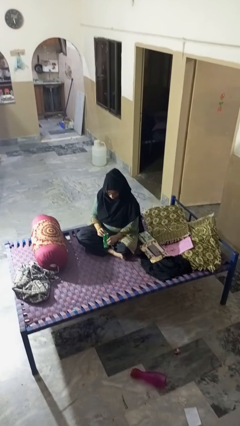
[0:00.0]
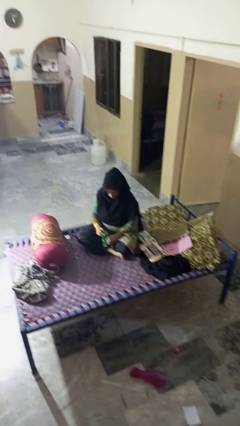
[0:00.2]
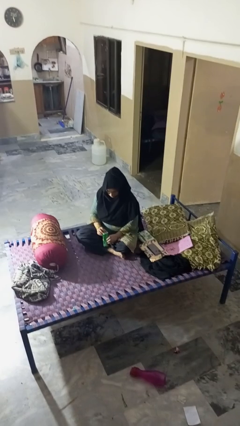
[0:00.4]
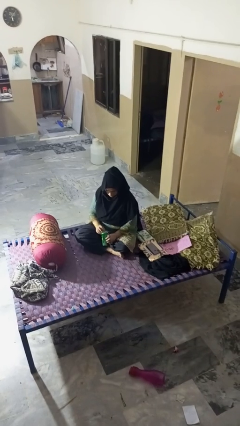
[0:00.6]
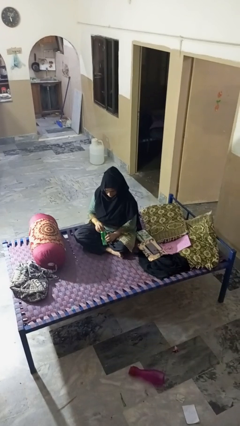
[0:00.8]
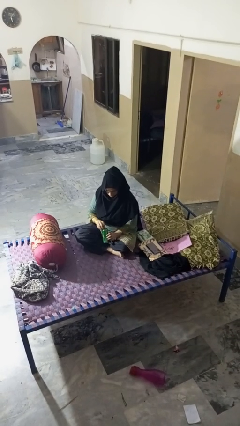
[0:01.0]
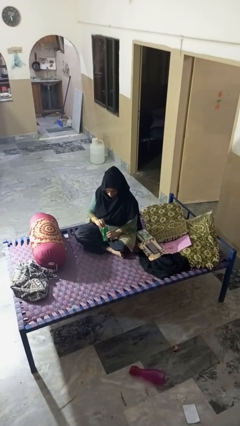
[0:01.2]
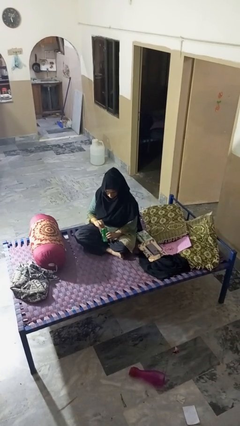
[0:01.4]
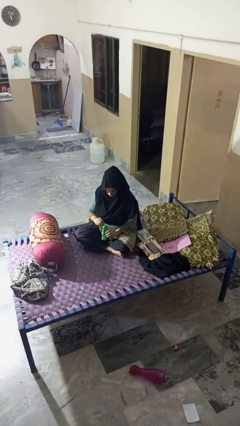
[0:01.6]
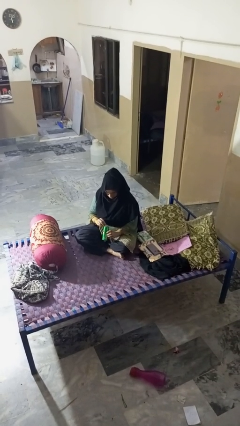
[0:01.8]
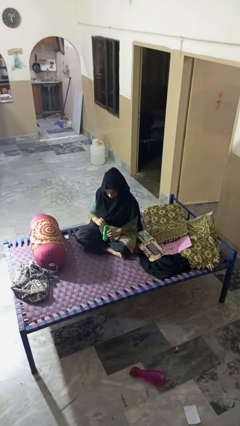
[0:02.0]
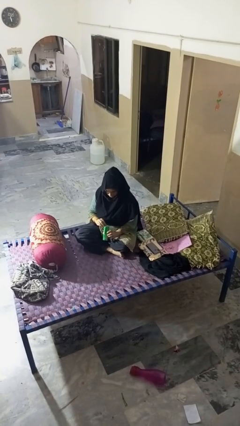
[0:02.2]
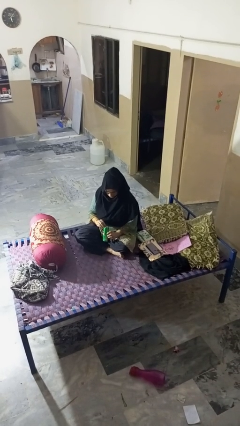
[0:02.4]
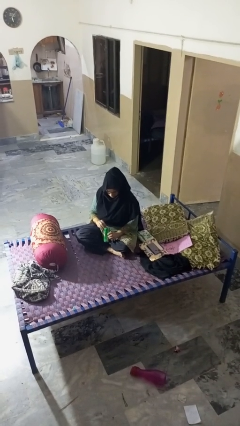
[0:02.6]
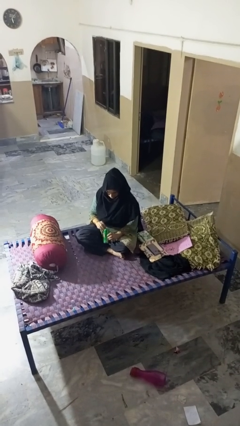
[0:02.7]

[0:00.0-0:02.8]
person opens can with can opener

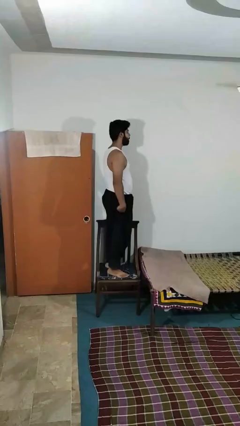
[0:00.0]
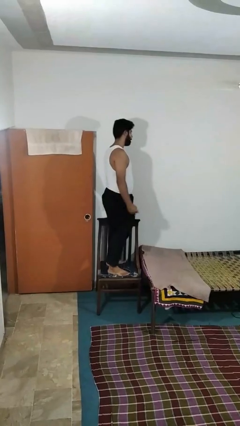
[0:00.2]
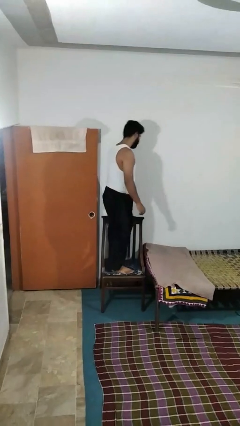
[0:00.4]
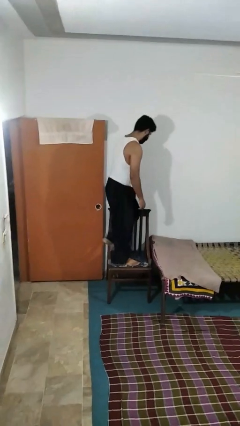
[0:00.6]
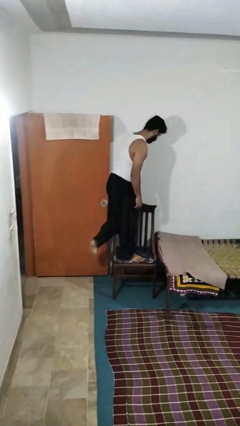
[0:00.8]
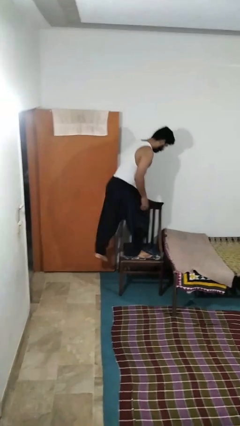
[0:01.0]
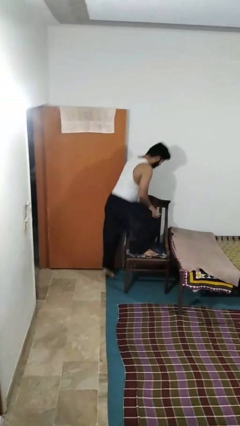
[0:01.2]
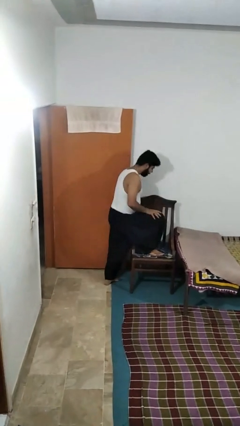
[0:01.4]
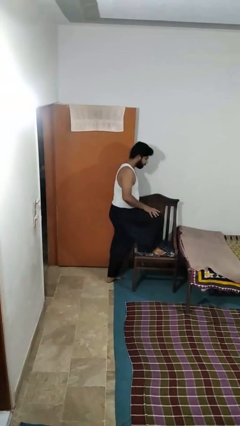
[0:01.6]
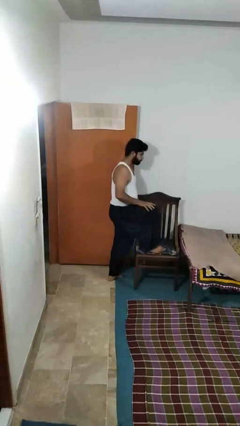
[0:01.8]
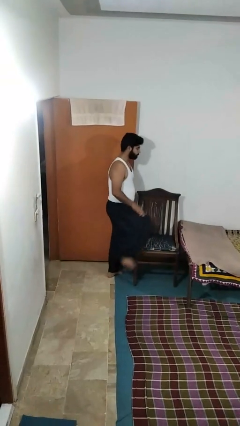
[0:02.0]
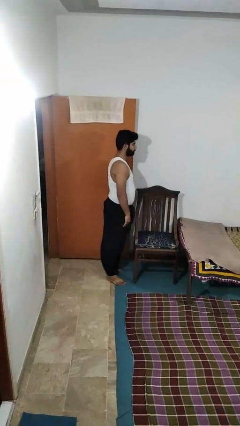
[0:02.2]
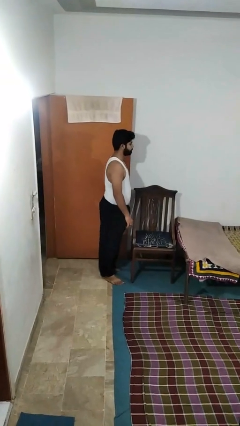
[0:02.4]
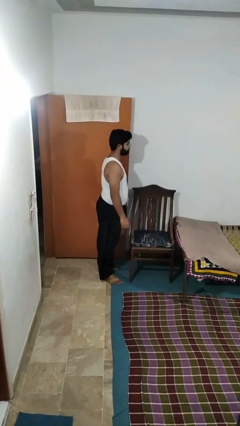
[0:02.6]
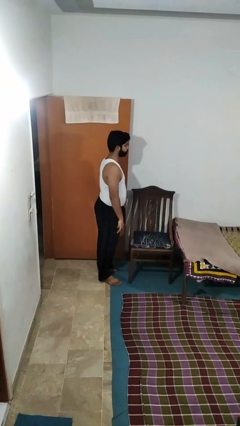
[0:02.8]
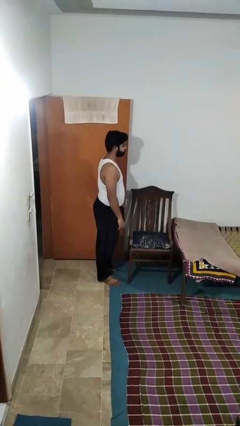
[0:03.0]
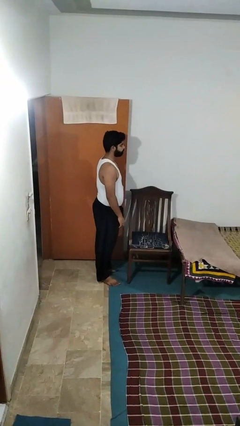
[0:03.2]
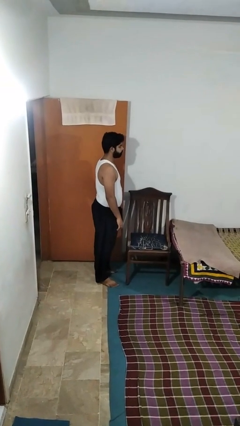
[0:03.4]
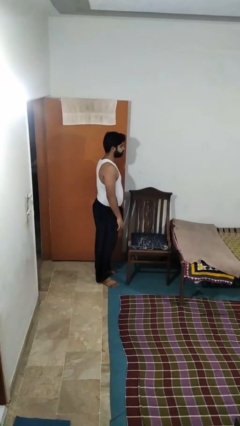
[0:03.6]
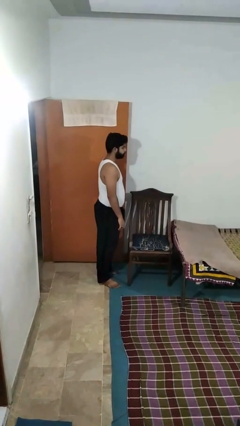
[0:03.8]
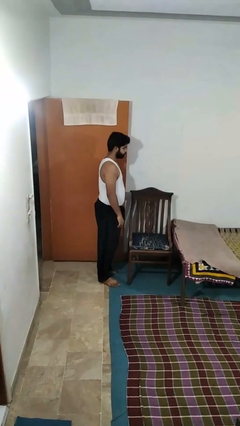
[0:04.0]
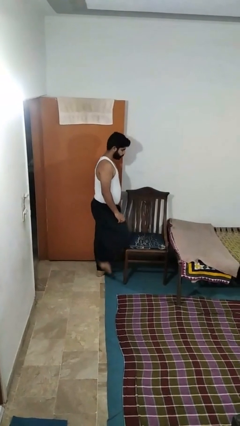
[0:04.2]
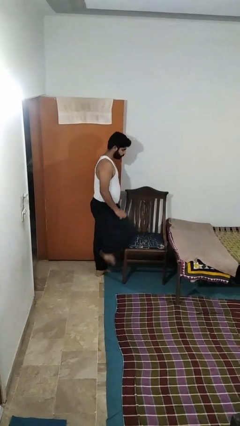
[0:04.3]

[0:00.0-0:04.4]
person climbs off chair

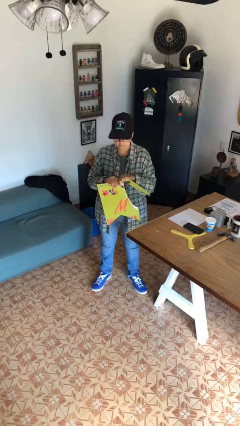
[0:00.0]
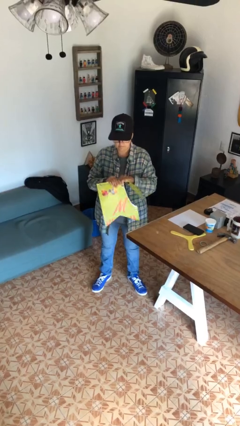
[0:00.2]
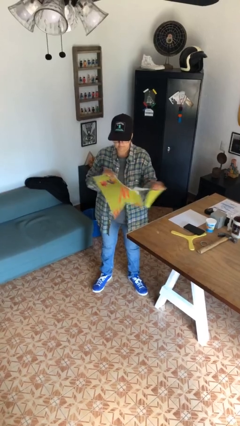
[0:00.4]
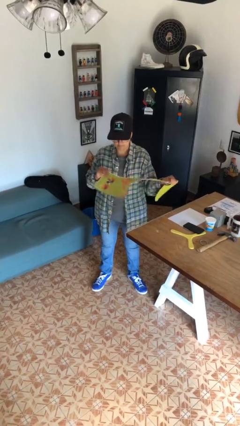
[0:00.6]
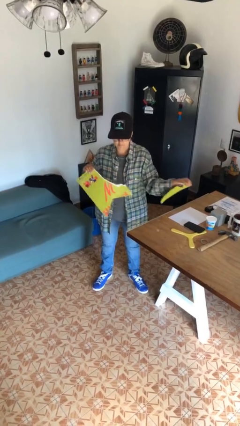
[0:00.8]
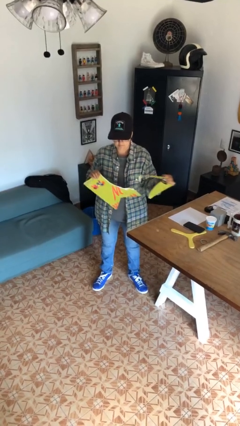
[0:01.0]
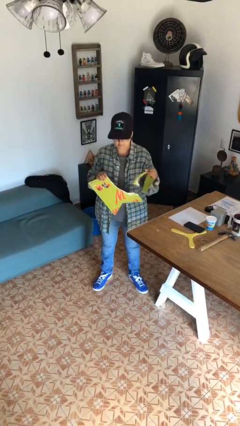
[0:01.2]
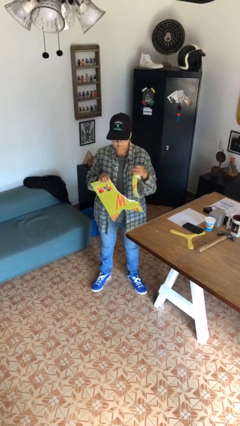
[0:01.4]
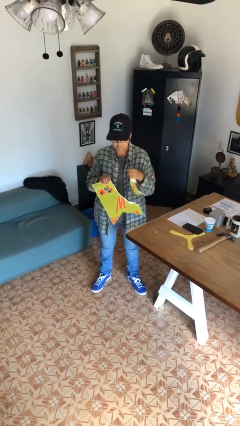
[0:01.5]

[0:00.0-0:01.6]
person tears paper

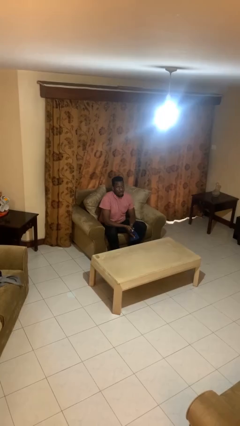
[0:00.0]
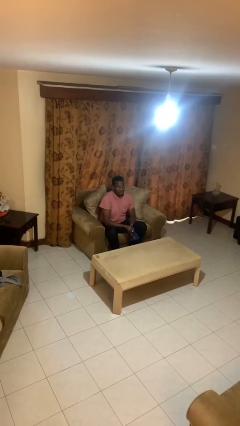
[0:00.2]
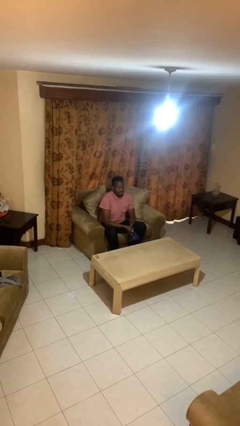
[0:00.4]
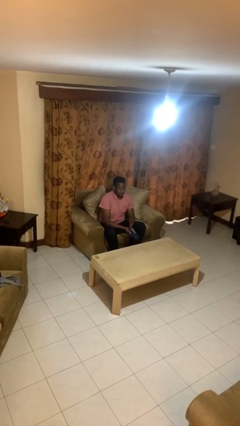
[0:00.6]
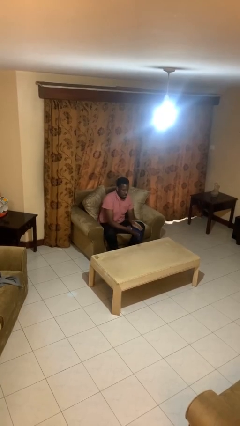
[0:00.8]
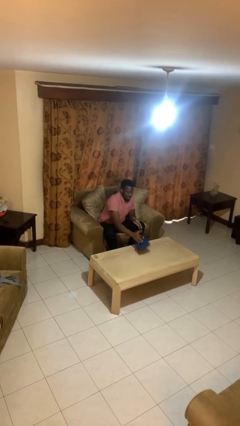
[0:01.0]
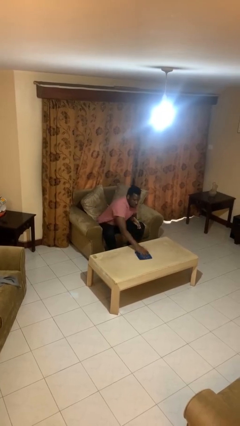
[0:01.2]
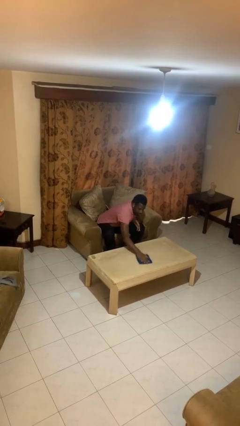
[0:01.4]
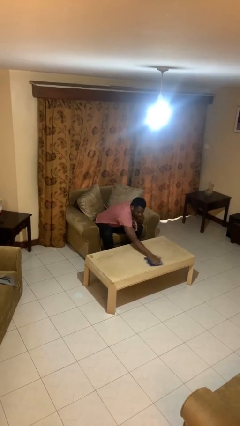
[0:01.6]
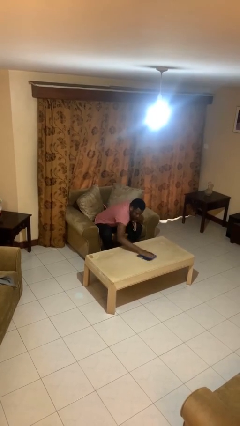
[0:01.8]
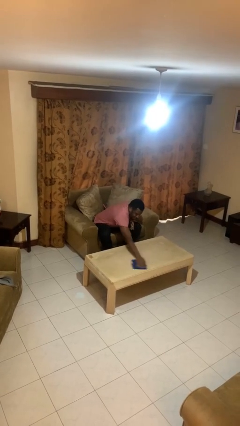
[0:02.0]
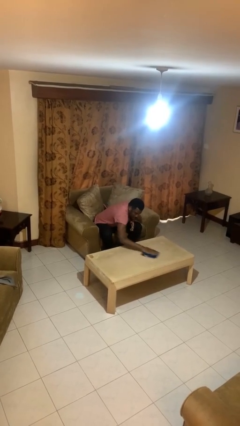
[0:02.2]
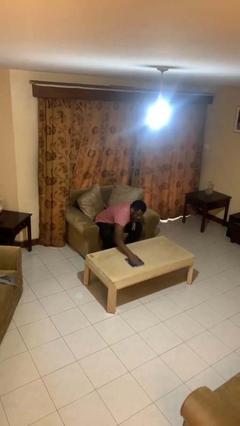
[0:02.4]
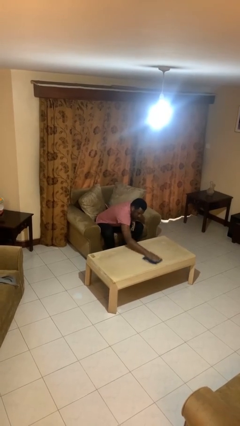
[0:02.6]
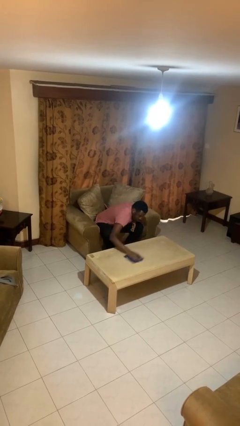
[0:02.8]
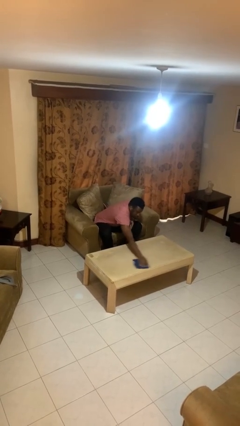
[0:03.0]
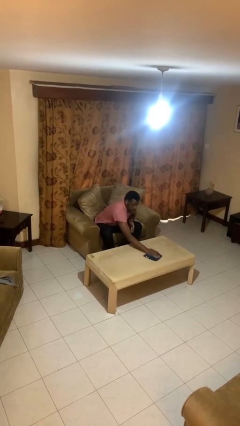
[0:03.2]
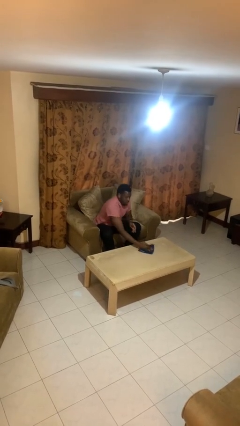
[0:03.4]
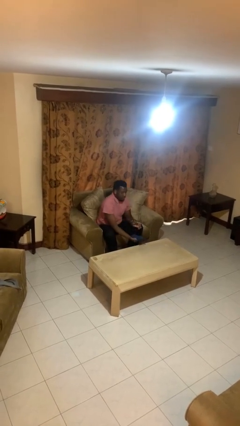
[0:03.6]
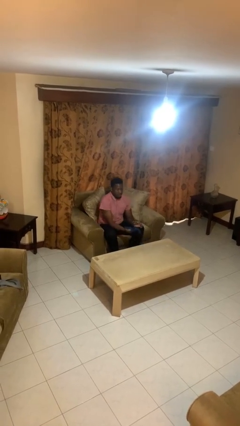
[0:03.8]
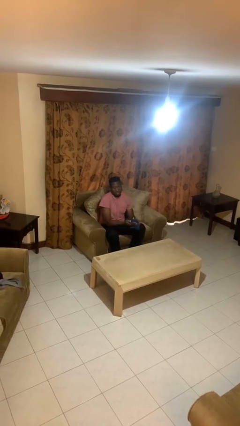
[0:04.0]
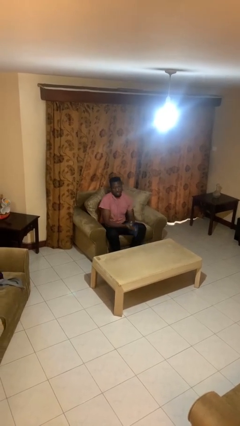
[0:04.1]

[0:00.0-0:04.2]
person cleans table with rag

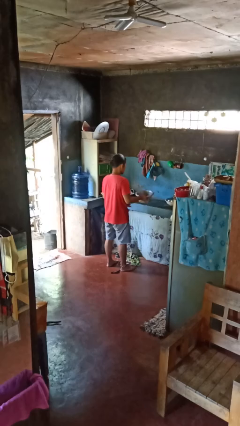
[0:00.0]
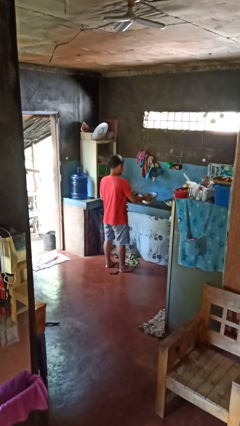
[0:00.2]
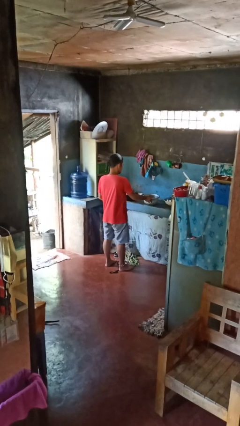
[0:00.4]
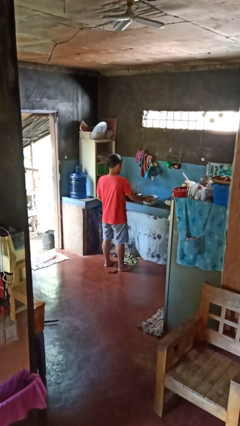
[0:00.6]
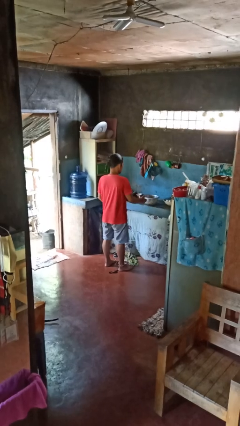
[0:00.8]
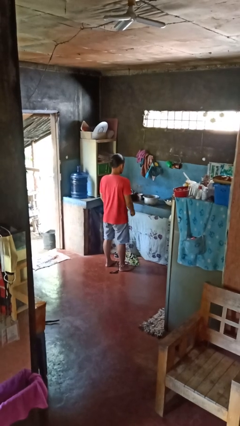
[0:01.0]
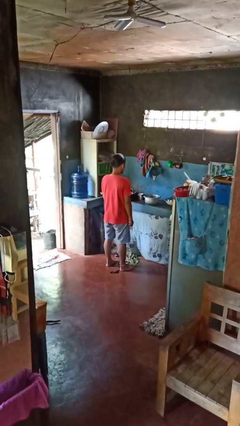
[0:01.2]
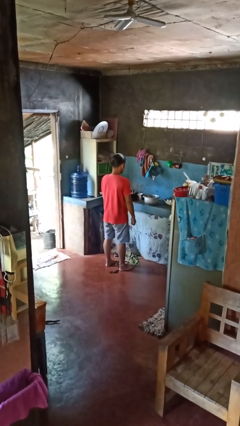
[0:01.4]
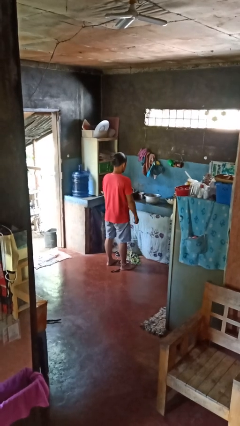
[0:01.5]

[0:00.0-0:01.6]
person puts down object on countertop

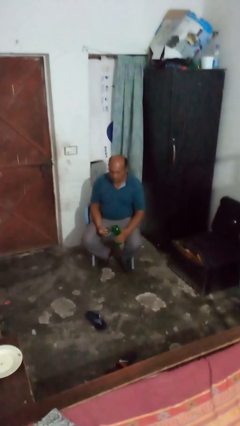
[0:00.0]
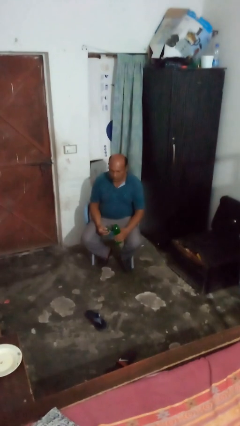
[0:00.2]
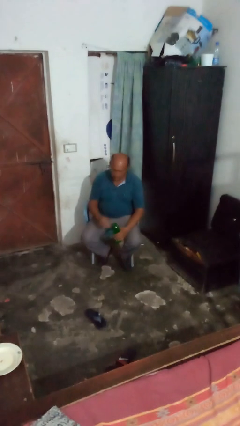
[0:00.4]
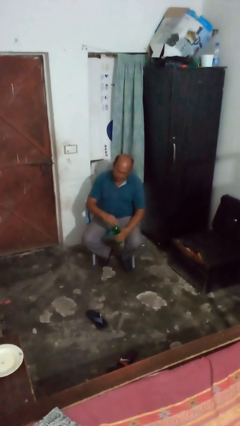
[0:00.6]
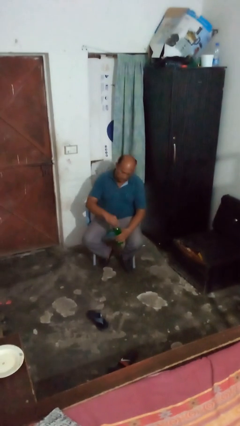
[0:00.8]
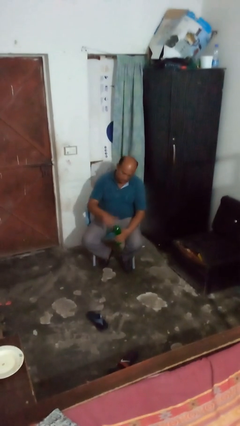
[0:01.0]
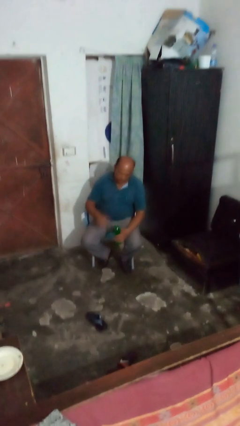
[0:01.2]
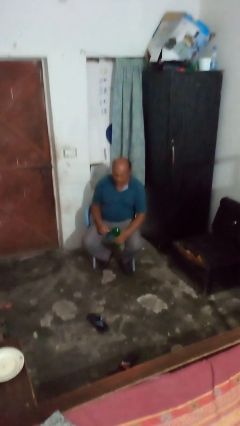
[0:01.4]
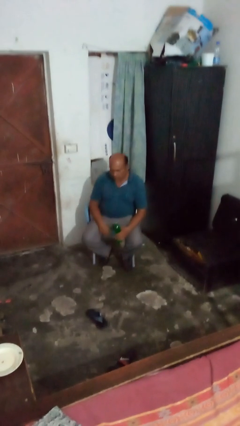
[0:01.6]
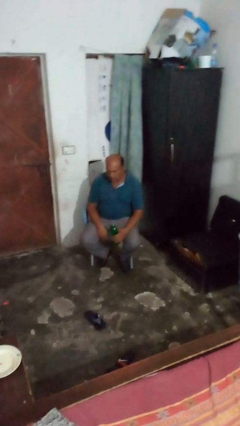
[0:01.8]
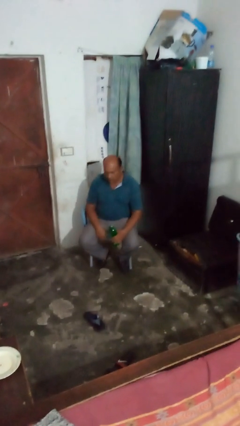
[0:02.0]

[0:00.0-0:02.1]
person screws lid to bottle

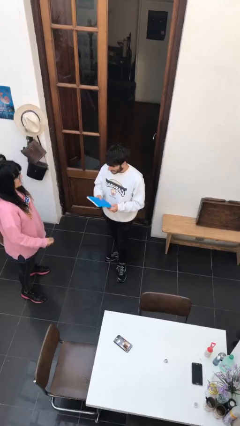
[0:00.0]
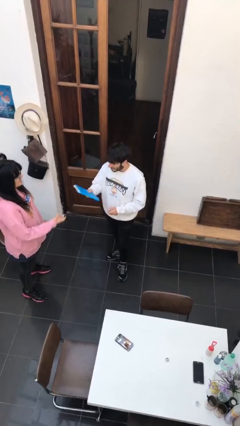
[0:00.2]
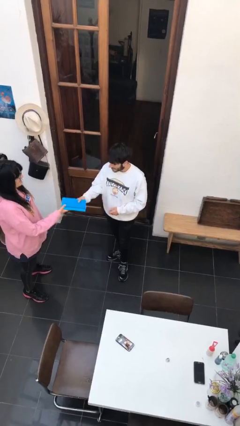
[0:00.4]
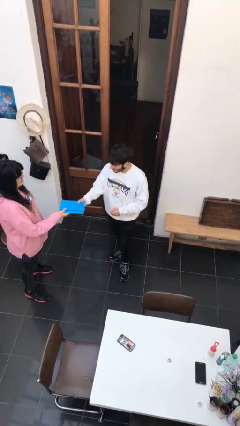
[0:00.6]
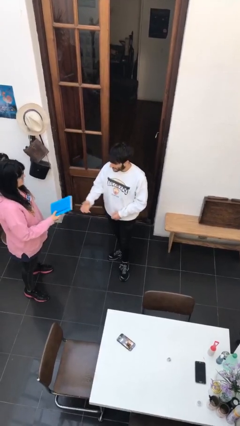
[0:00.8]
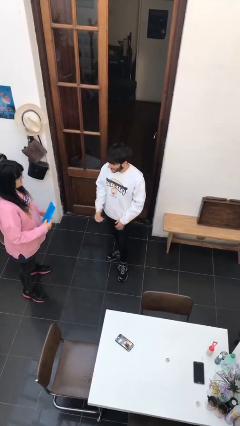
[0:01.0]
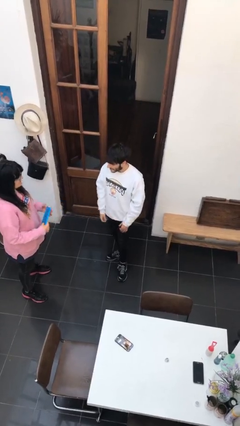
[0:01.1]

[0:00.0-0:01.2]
person transfers object to person
